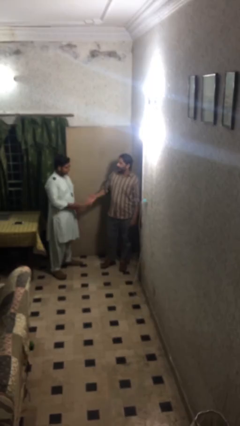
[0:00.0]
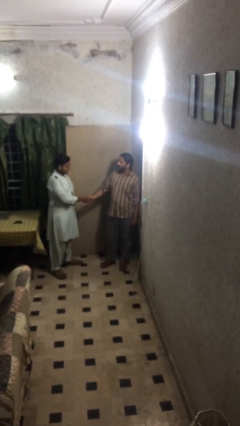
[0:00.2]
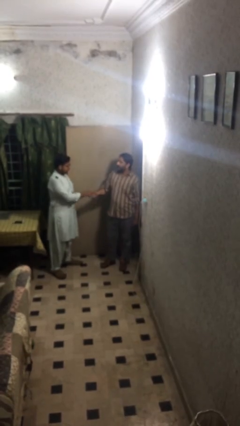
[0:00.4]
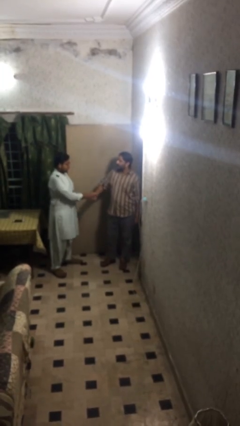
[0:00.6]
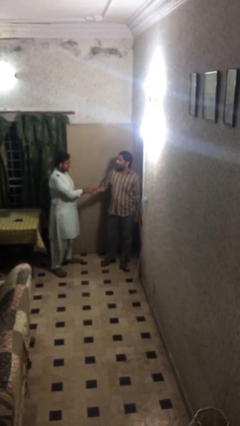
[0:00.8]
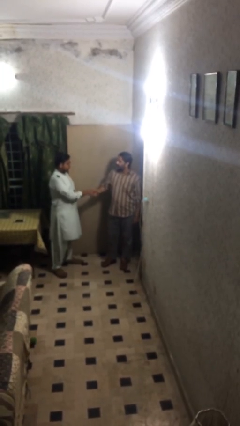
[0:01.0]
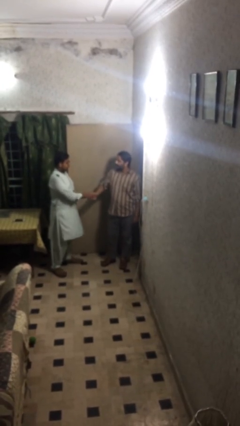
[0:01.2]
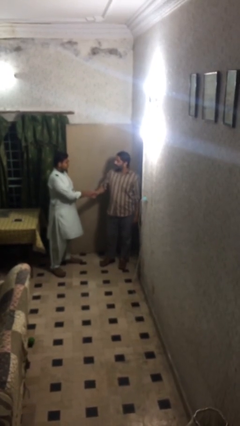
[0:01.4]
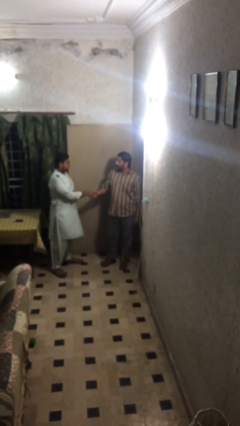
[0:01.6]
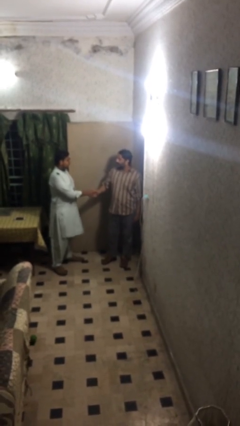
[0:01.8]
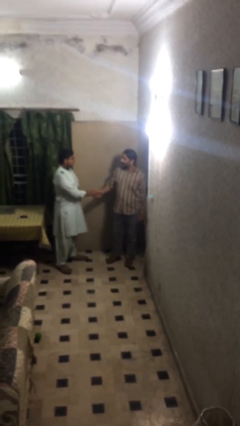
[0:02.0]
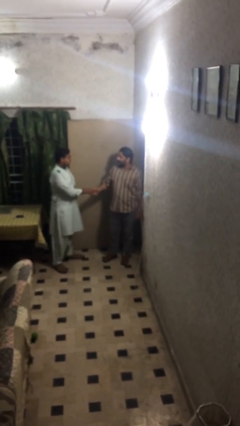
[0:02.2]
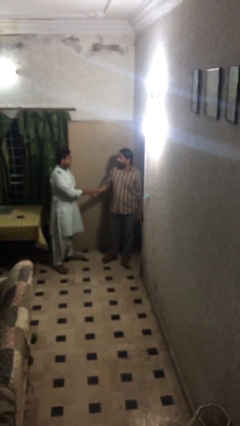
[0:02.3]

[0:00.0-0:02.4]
person shakes hand

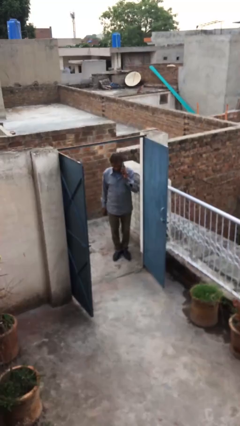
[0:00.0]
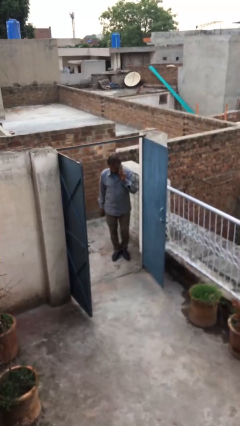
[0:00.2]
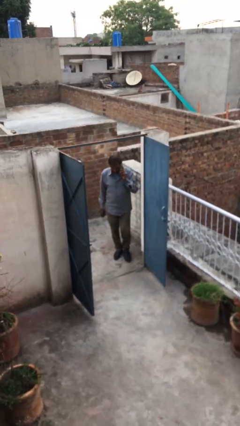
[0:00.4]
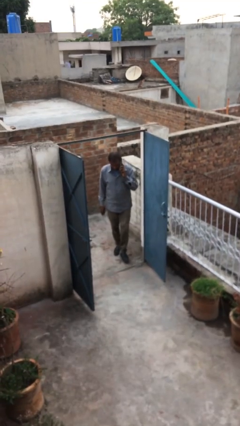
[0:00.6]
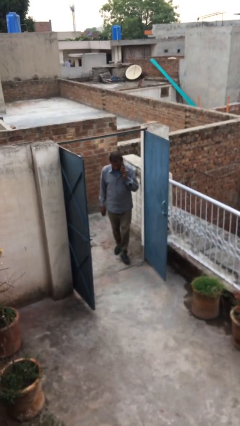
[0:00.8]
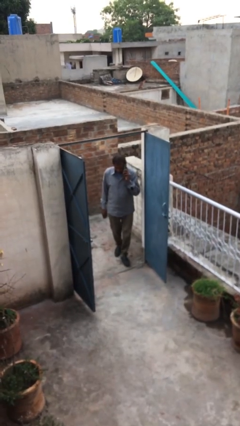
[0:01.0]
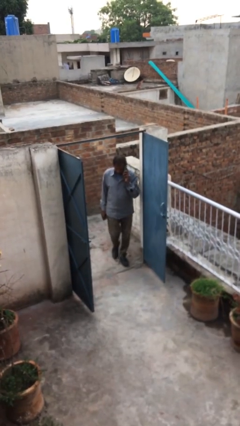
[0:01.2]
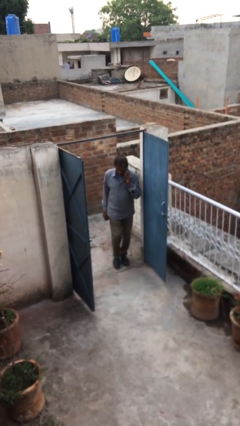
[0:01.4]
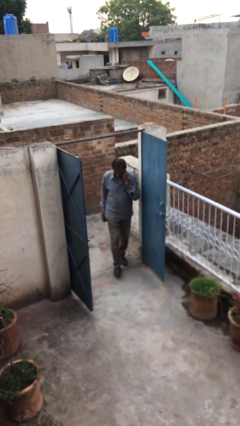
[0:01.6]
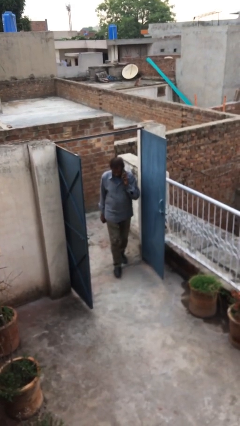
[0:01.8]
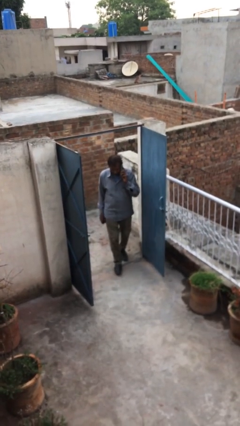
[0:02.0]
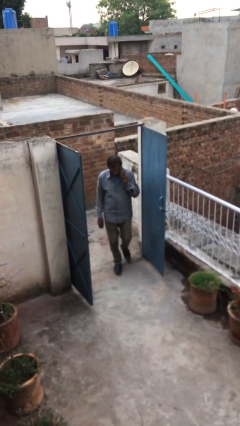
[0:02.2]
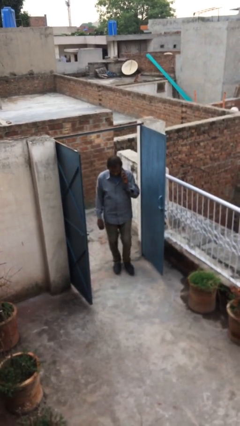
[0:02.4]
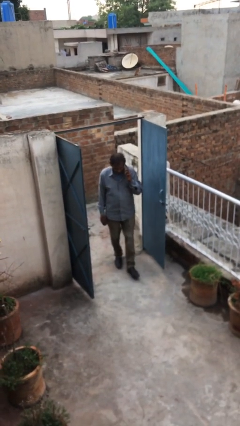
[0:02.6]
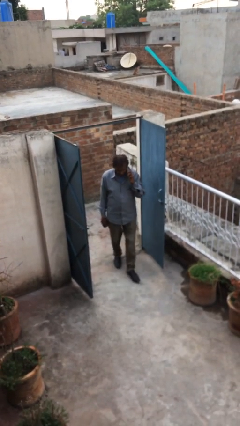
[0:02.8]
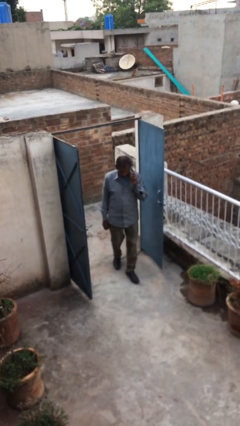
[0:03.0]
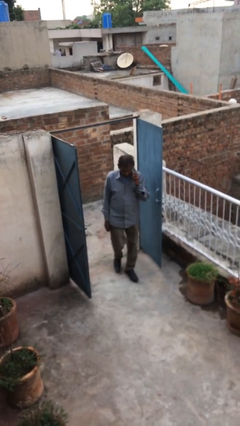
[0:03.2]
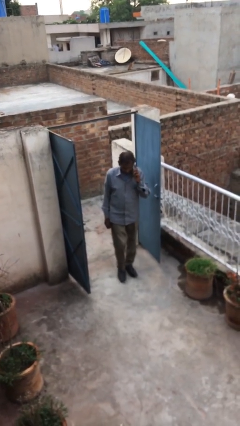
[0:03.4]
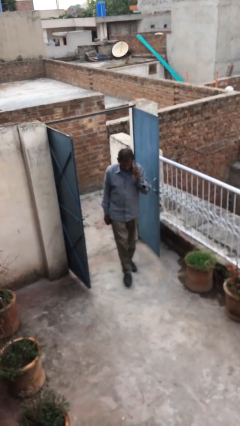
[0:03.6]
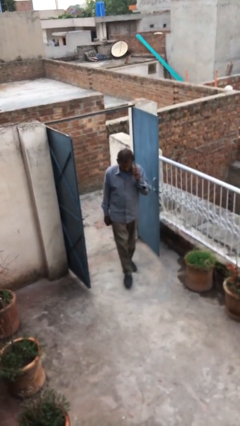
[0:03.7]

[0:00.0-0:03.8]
person enters scene through structure

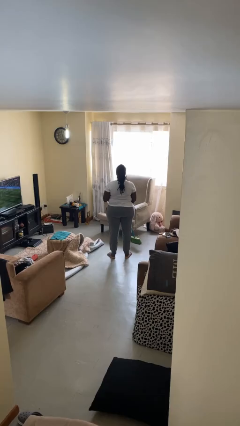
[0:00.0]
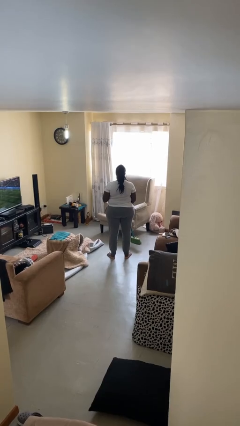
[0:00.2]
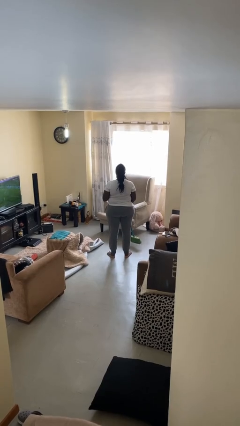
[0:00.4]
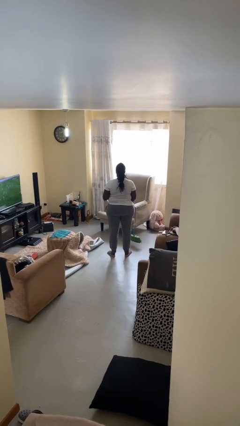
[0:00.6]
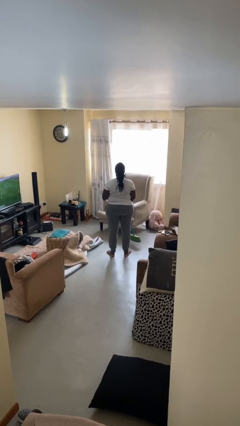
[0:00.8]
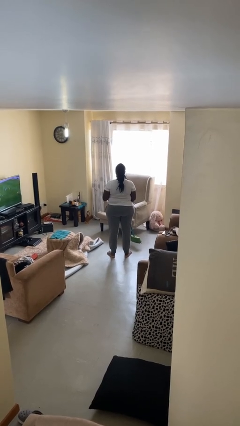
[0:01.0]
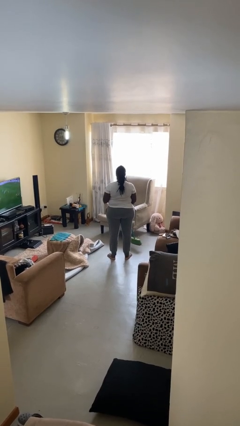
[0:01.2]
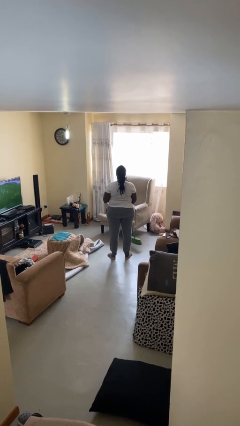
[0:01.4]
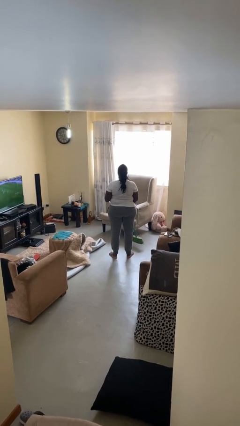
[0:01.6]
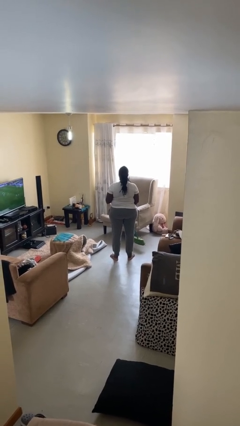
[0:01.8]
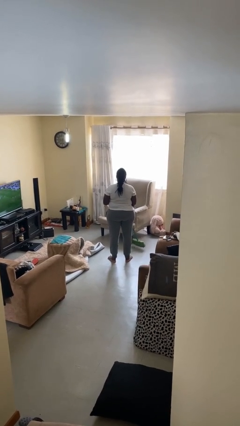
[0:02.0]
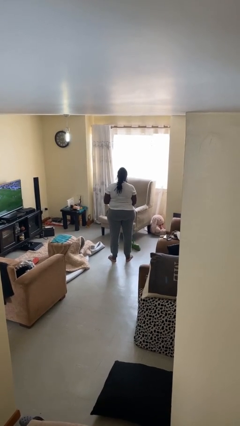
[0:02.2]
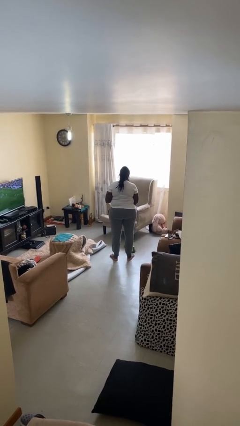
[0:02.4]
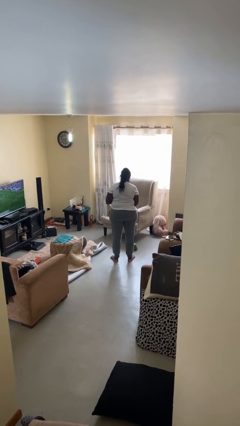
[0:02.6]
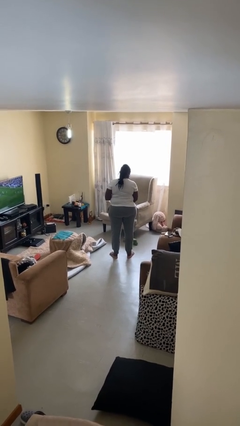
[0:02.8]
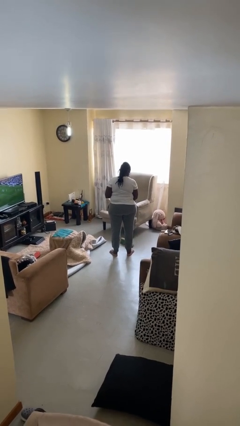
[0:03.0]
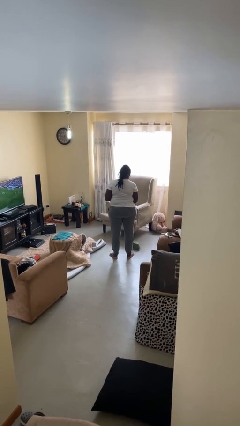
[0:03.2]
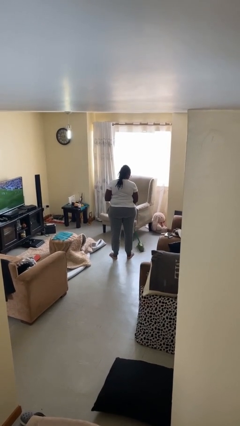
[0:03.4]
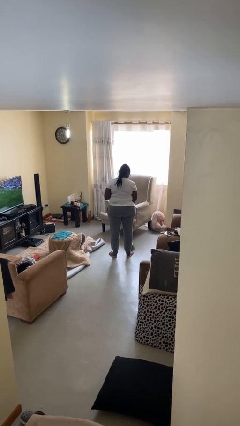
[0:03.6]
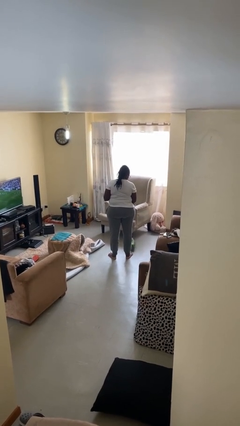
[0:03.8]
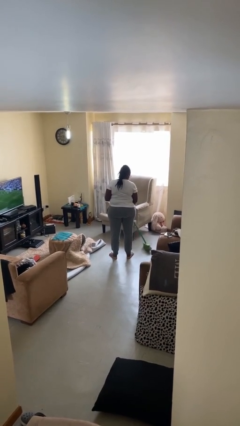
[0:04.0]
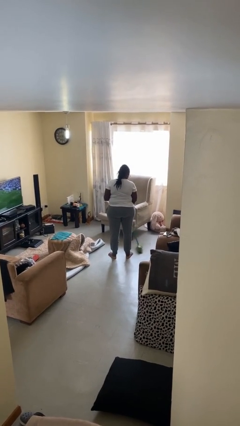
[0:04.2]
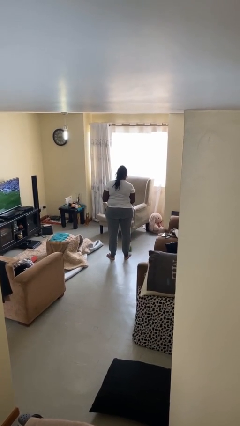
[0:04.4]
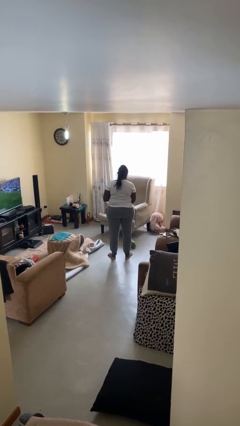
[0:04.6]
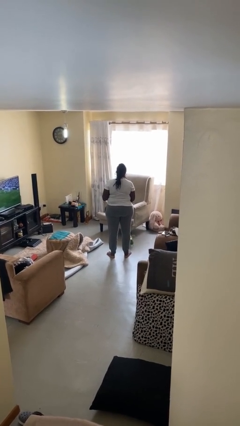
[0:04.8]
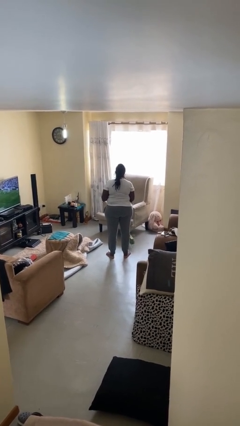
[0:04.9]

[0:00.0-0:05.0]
person sweeps floor

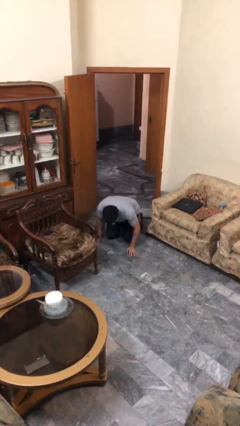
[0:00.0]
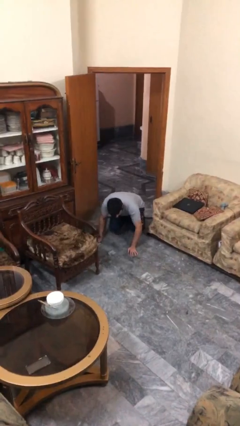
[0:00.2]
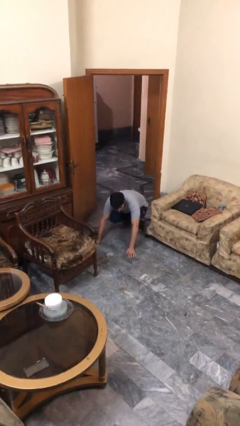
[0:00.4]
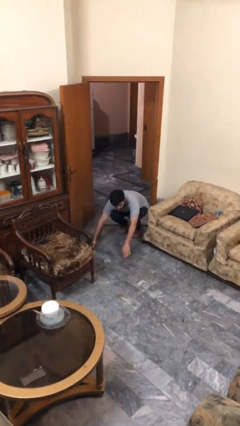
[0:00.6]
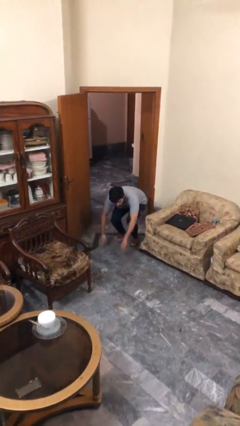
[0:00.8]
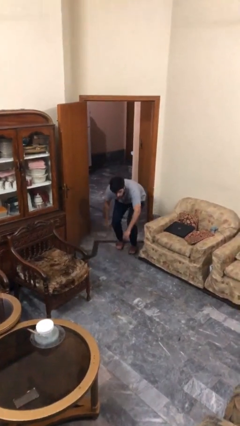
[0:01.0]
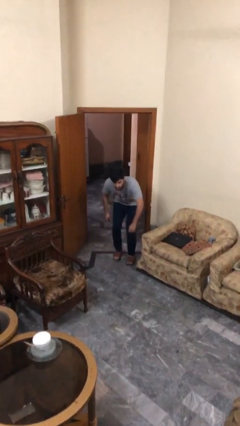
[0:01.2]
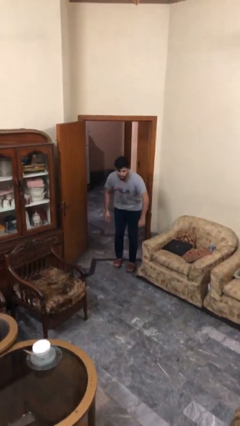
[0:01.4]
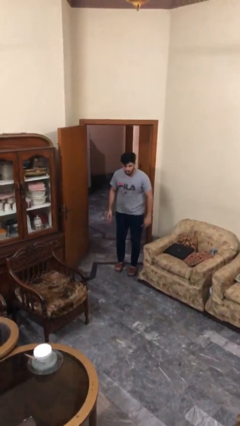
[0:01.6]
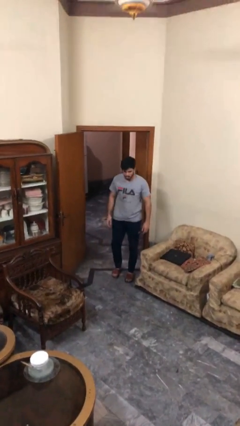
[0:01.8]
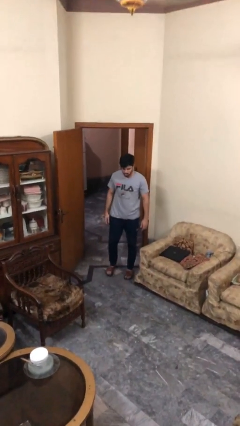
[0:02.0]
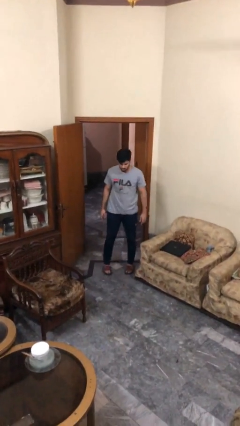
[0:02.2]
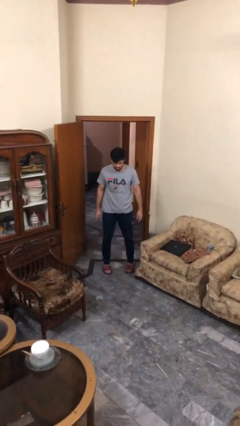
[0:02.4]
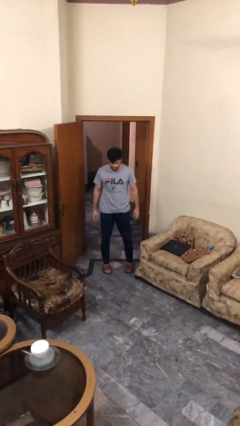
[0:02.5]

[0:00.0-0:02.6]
person stands up from floor

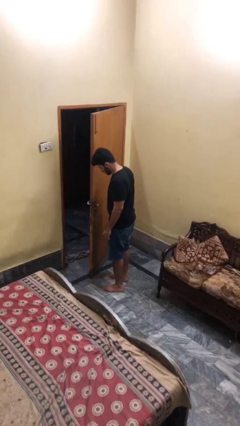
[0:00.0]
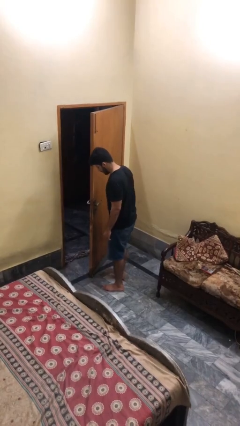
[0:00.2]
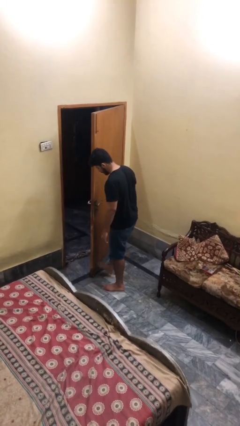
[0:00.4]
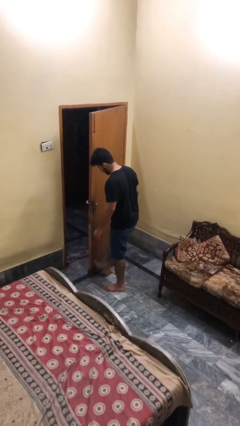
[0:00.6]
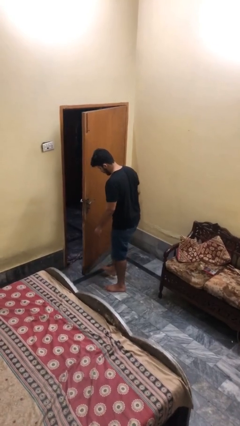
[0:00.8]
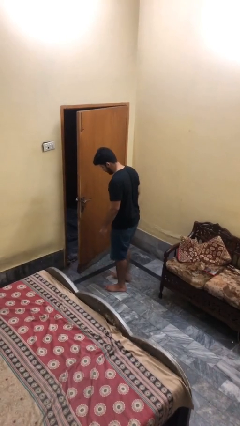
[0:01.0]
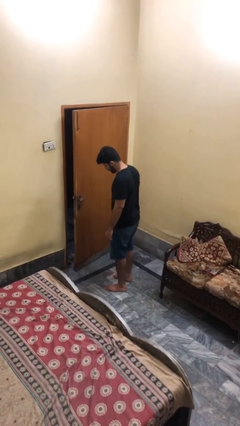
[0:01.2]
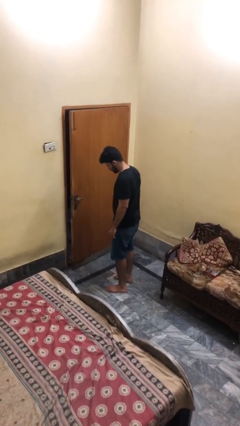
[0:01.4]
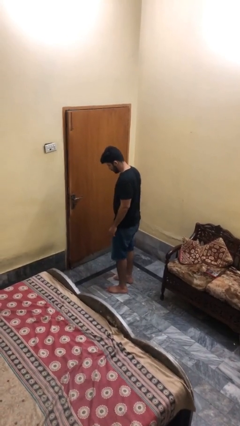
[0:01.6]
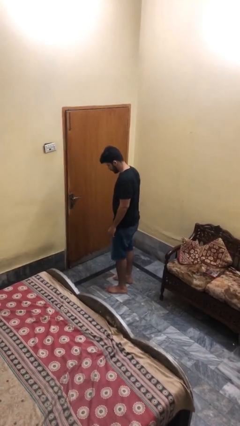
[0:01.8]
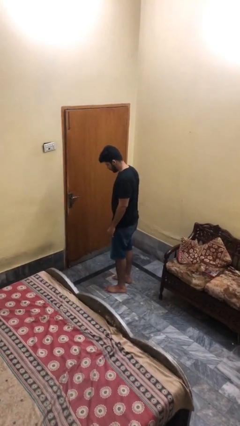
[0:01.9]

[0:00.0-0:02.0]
person closes door with foot

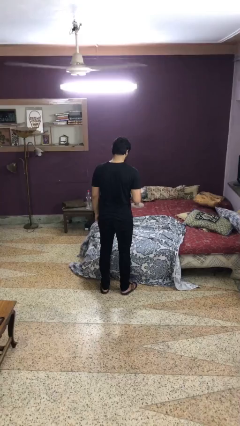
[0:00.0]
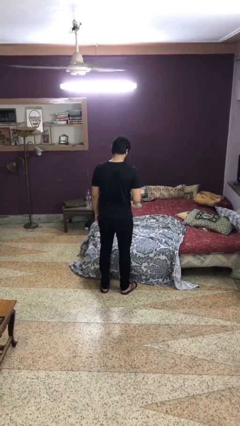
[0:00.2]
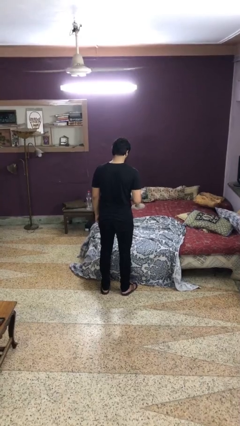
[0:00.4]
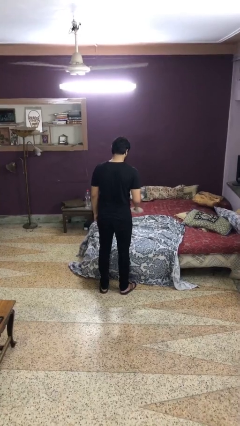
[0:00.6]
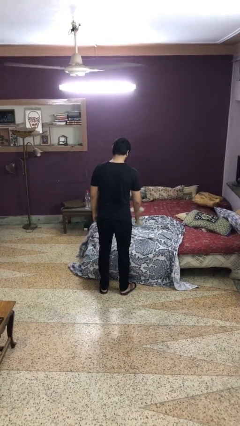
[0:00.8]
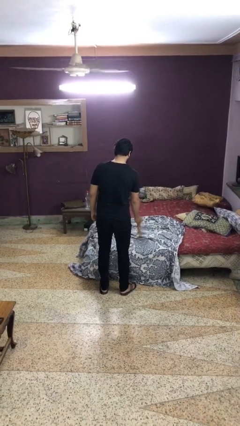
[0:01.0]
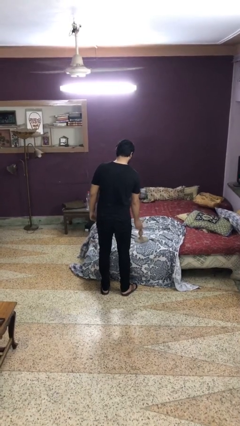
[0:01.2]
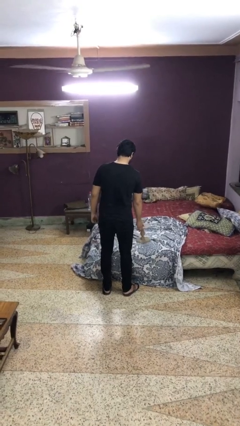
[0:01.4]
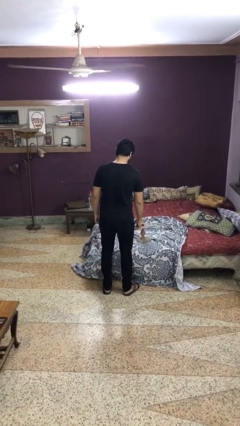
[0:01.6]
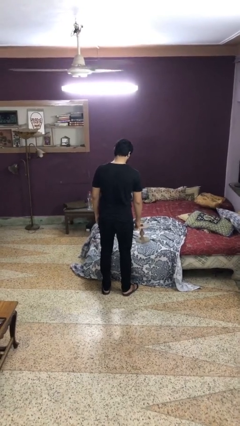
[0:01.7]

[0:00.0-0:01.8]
person puts down object on bed
